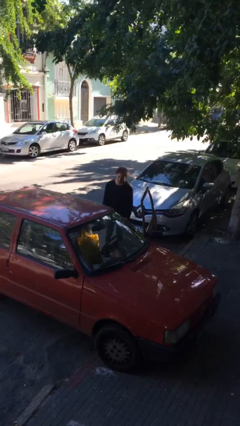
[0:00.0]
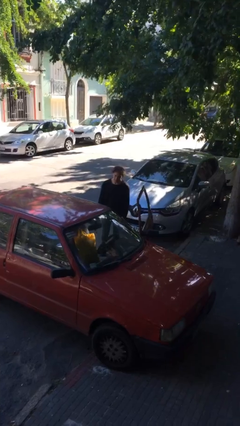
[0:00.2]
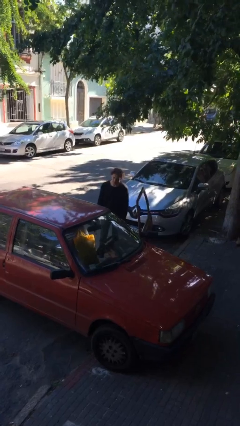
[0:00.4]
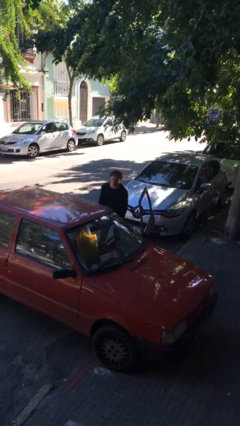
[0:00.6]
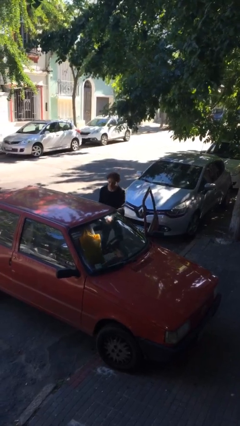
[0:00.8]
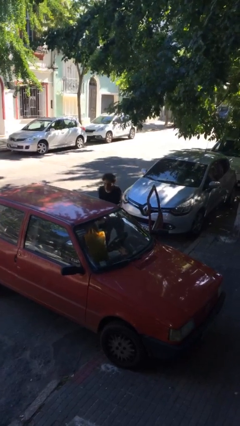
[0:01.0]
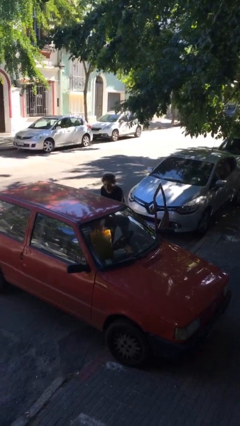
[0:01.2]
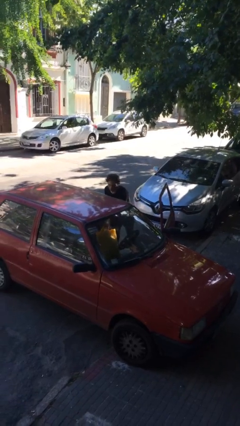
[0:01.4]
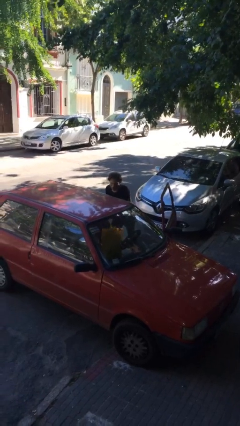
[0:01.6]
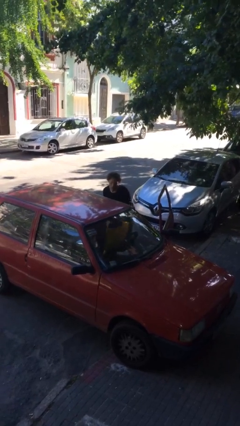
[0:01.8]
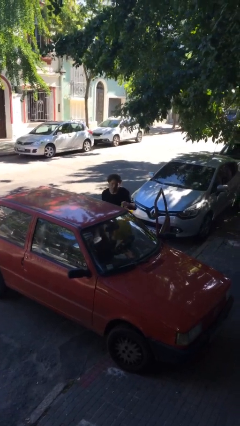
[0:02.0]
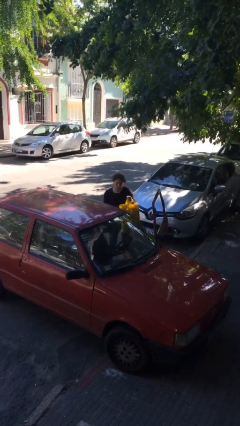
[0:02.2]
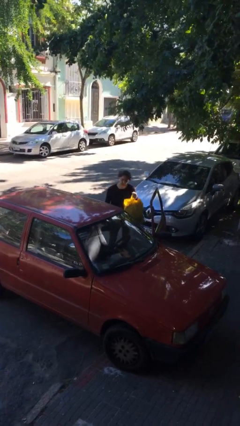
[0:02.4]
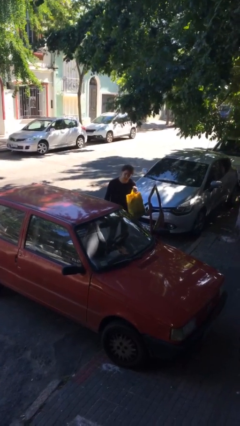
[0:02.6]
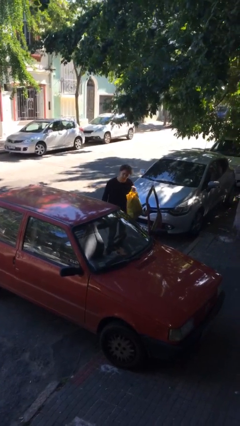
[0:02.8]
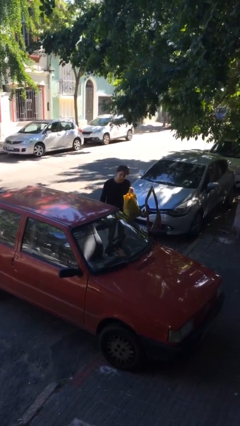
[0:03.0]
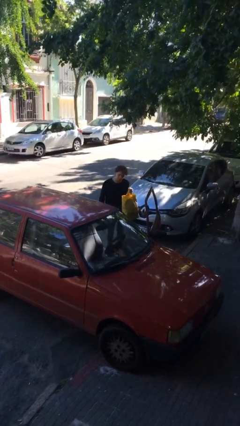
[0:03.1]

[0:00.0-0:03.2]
person unloads car

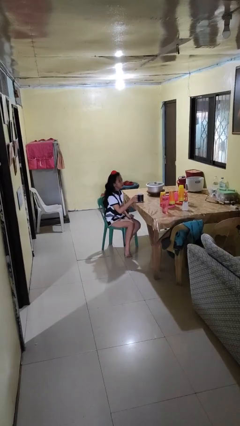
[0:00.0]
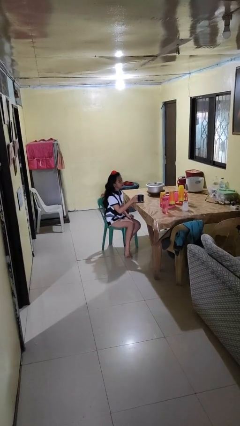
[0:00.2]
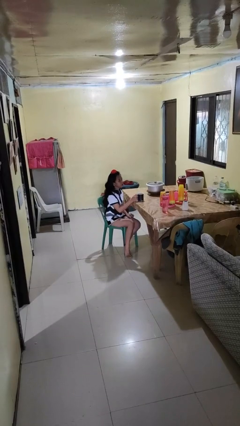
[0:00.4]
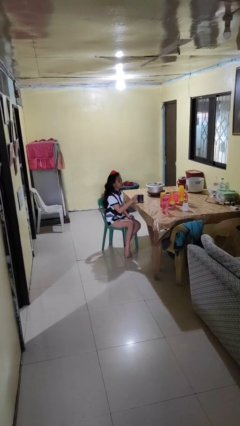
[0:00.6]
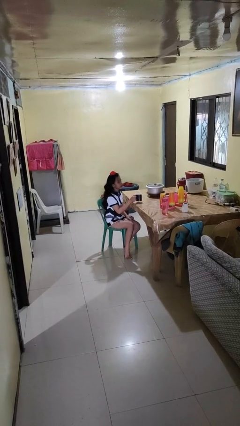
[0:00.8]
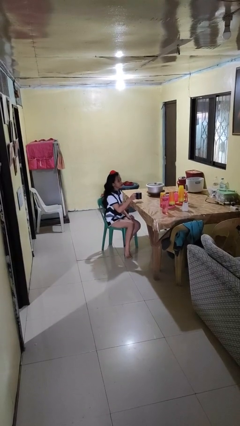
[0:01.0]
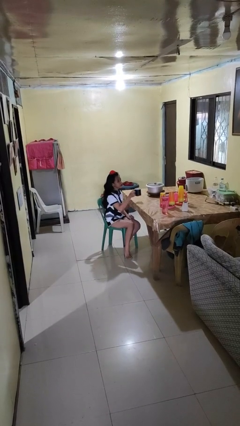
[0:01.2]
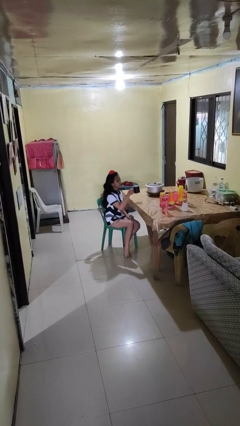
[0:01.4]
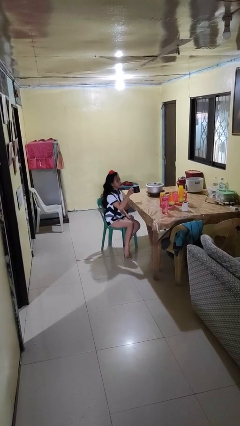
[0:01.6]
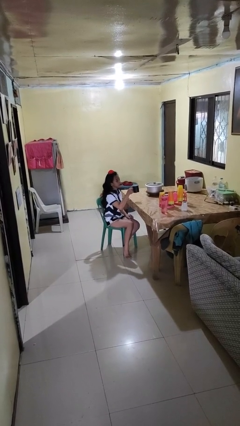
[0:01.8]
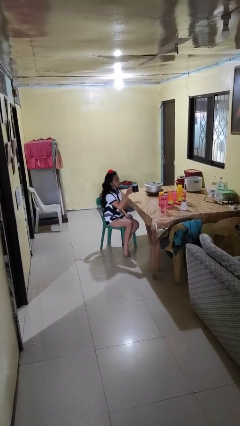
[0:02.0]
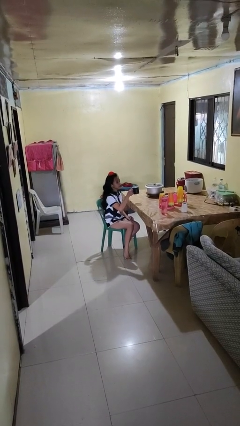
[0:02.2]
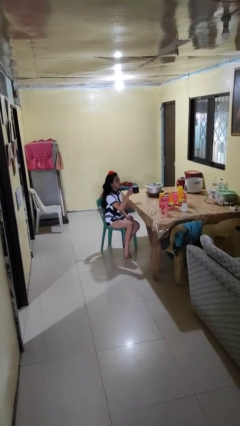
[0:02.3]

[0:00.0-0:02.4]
person picks up object from table

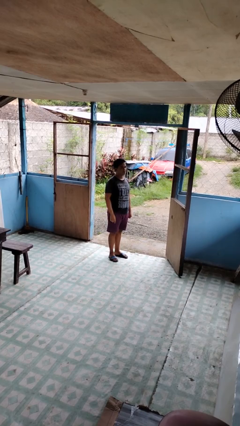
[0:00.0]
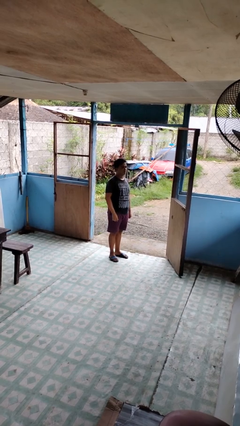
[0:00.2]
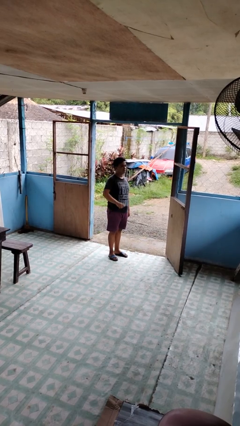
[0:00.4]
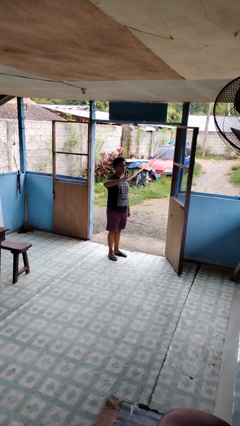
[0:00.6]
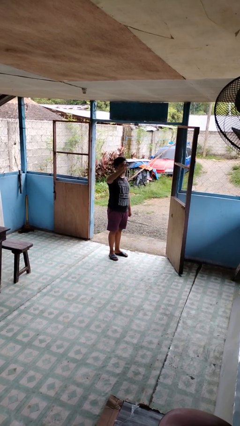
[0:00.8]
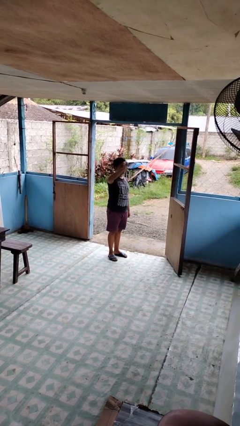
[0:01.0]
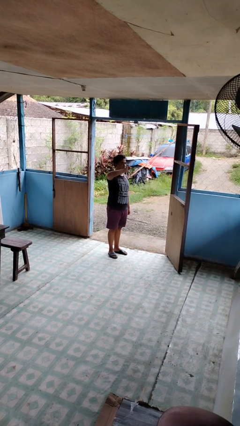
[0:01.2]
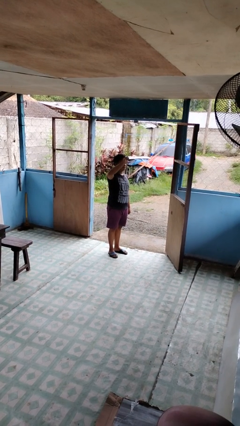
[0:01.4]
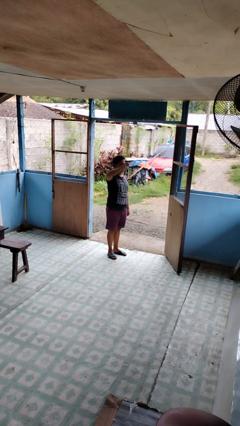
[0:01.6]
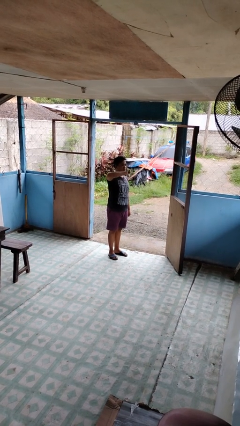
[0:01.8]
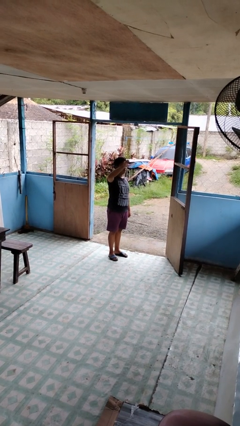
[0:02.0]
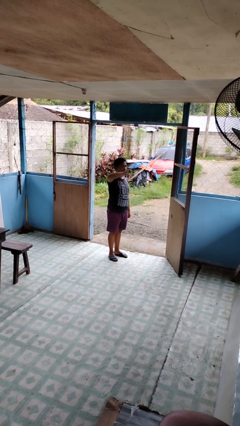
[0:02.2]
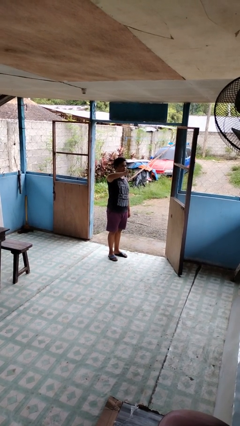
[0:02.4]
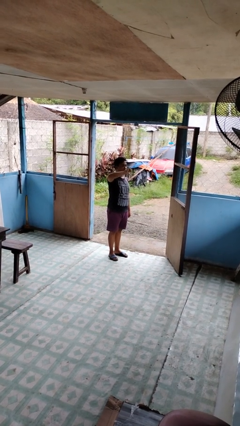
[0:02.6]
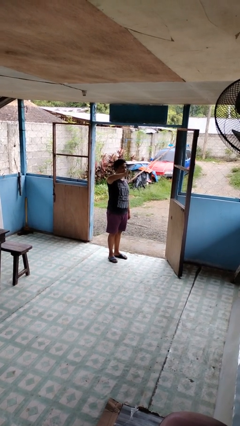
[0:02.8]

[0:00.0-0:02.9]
person gestures thumbs down

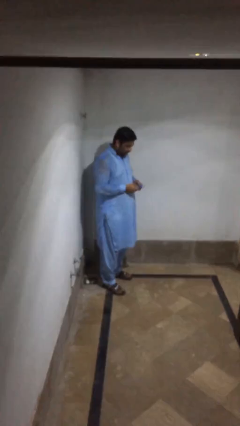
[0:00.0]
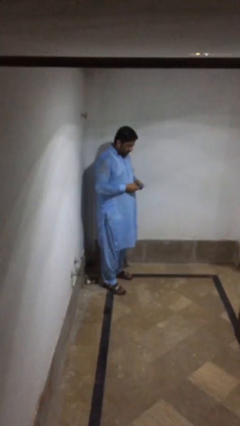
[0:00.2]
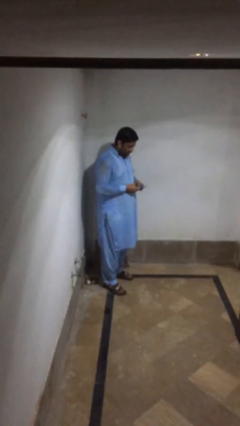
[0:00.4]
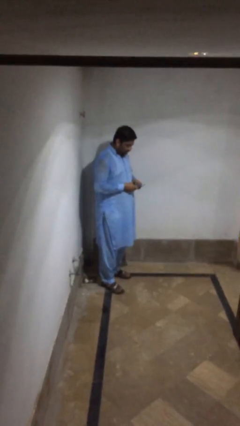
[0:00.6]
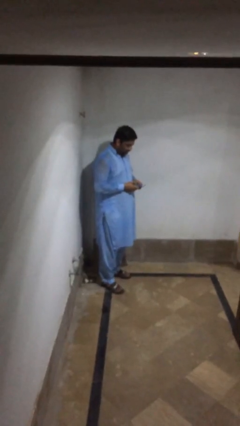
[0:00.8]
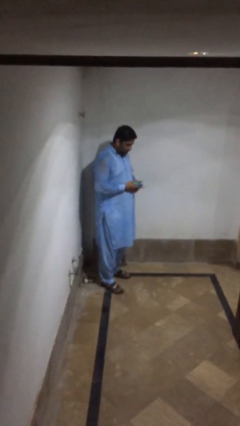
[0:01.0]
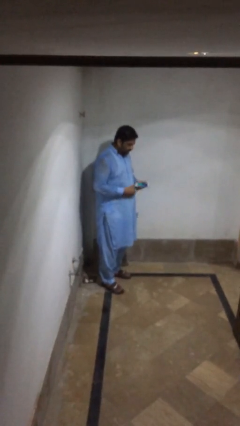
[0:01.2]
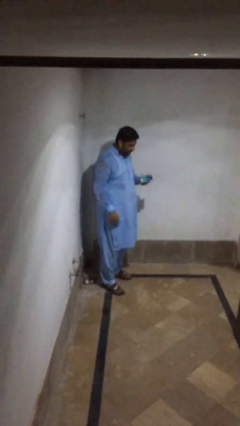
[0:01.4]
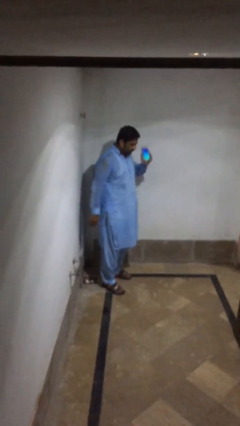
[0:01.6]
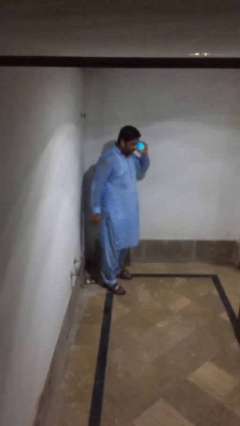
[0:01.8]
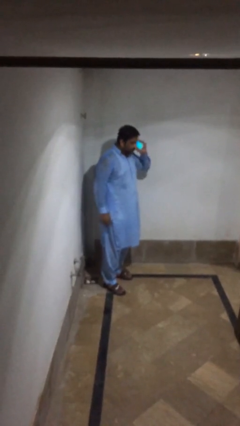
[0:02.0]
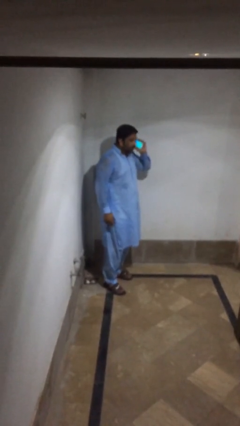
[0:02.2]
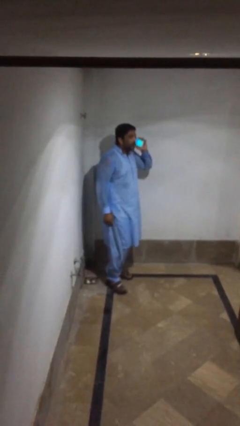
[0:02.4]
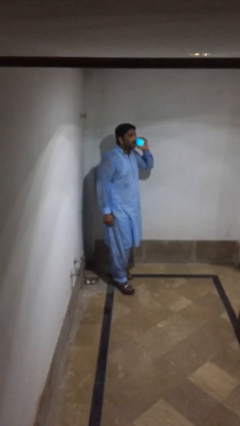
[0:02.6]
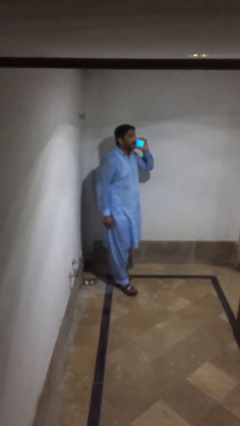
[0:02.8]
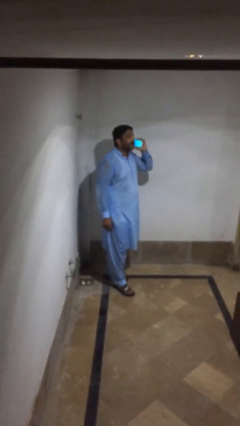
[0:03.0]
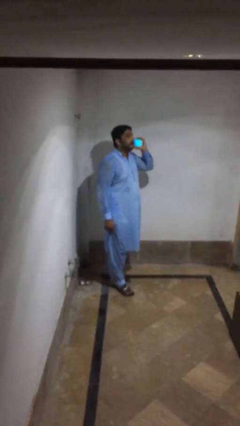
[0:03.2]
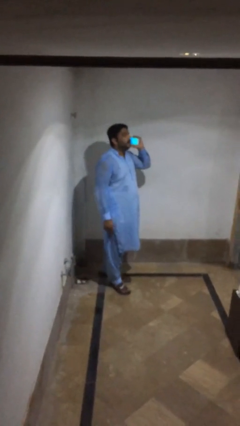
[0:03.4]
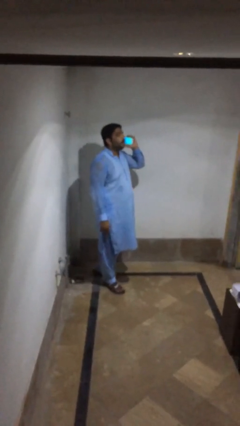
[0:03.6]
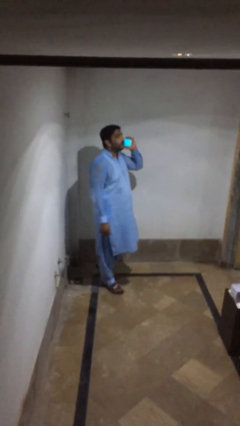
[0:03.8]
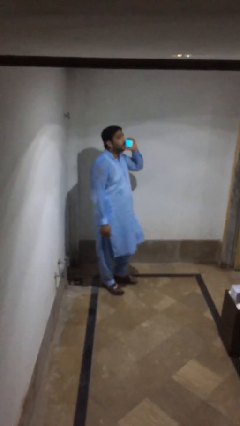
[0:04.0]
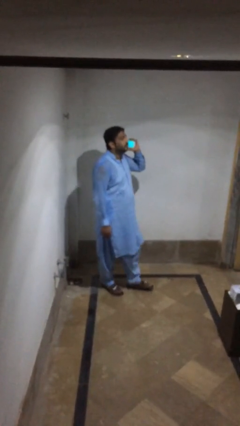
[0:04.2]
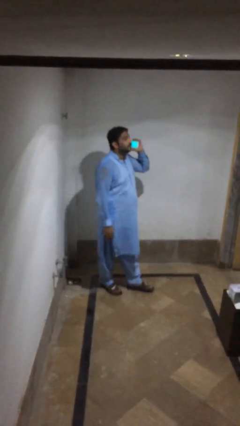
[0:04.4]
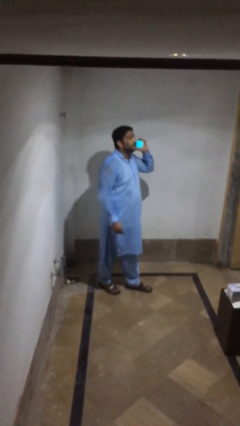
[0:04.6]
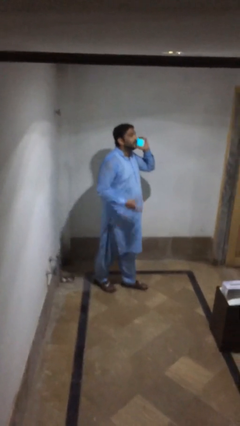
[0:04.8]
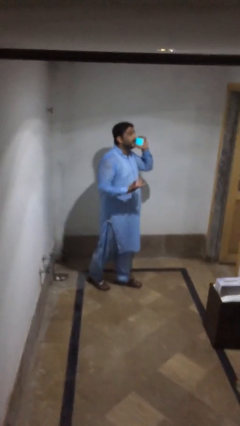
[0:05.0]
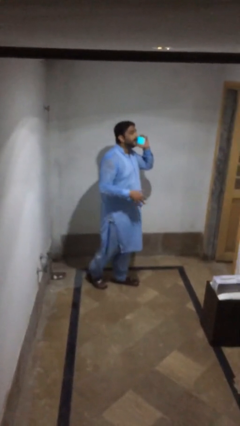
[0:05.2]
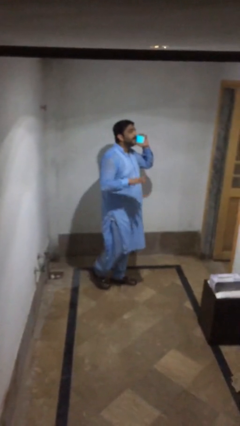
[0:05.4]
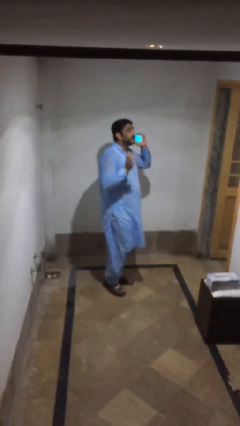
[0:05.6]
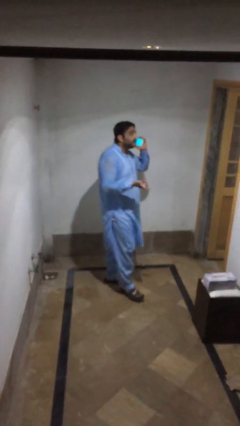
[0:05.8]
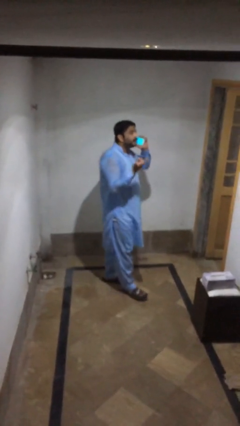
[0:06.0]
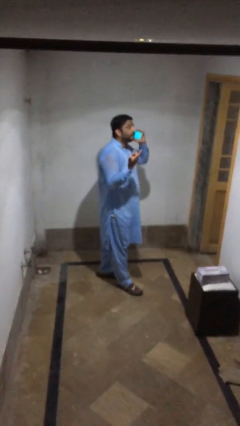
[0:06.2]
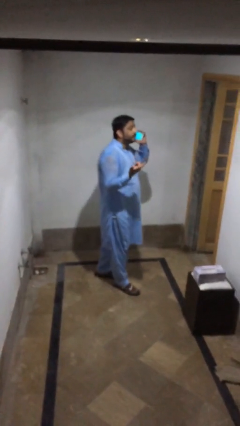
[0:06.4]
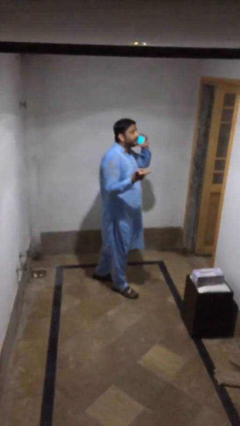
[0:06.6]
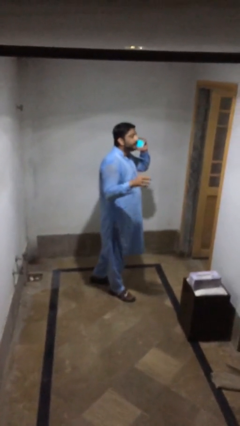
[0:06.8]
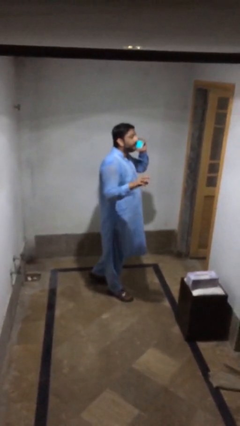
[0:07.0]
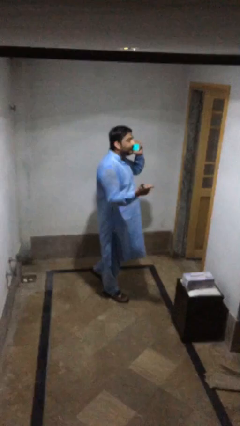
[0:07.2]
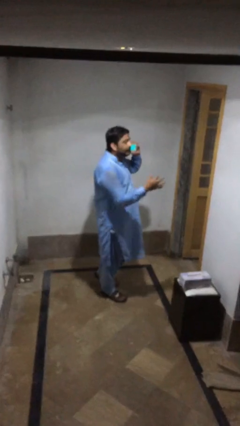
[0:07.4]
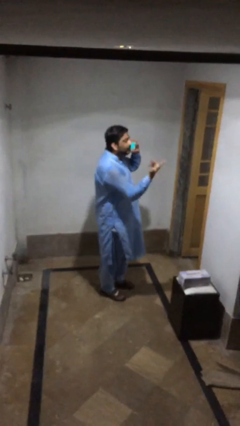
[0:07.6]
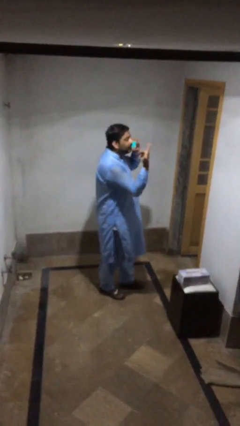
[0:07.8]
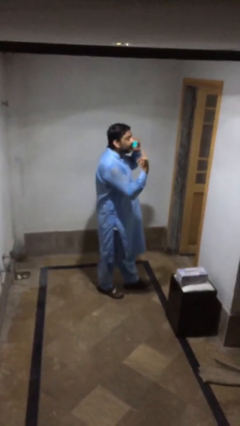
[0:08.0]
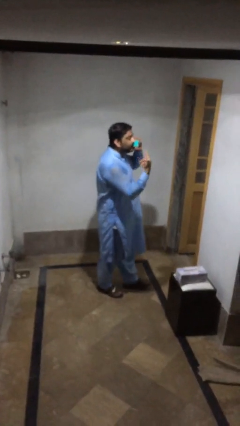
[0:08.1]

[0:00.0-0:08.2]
person talks on phone

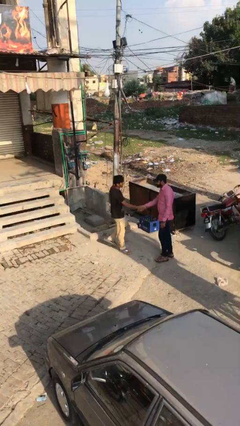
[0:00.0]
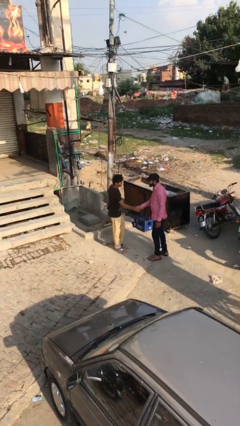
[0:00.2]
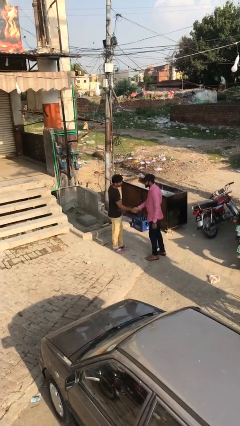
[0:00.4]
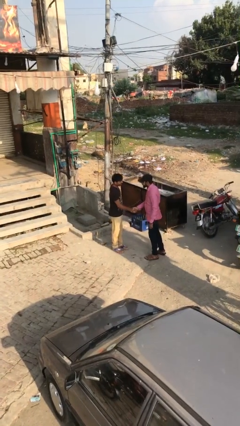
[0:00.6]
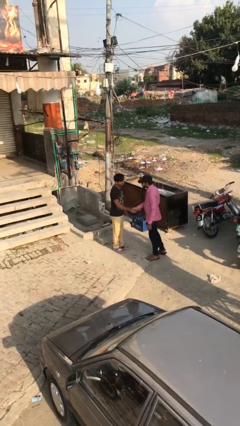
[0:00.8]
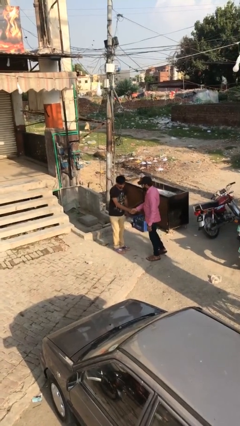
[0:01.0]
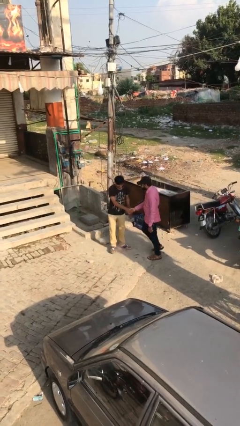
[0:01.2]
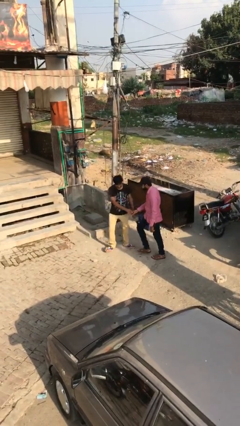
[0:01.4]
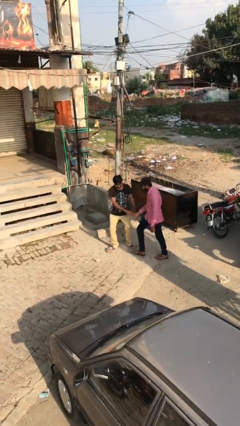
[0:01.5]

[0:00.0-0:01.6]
person shakes hand
